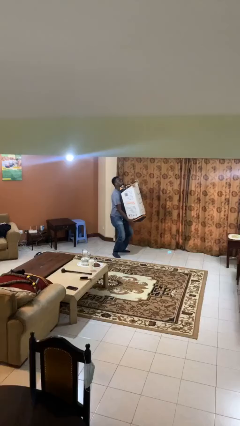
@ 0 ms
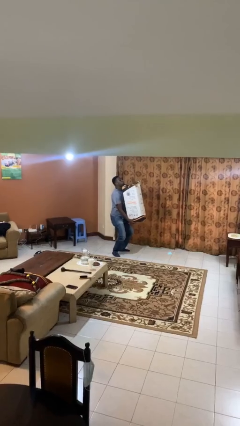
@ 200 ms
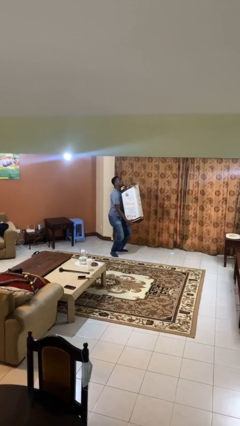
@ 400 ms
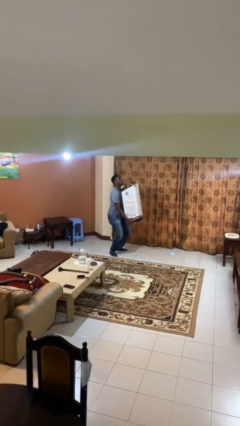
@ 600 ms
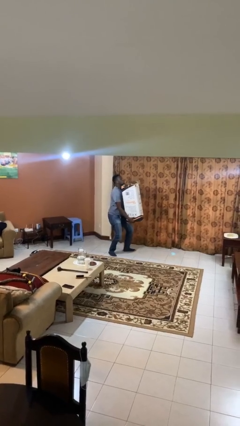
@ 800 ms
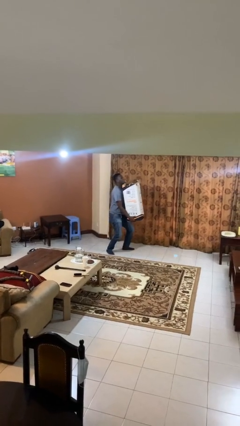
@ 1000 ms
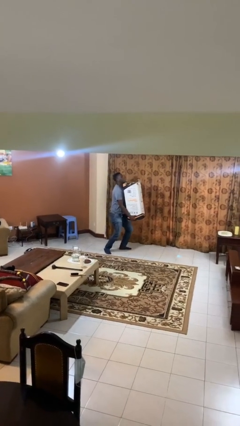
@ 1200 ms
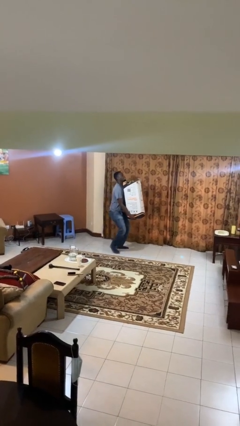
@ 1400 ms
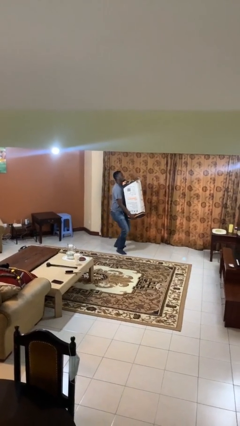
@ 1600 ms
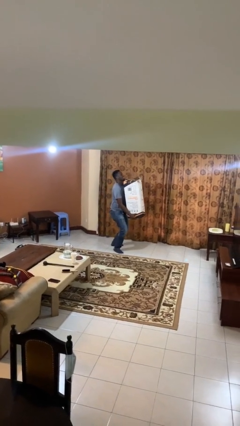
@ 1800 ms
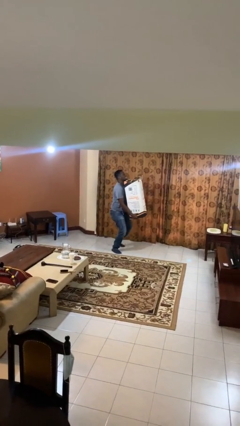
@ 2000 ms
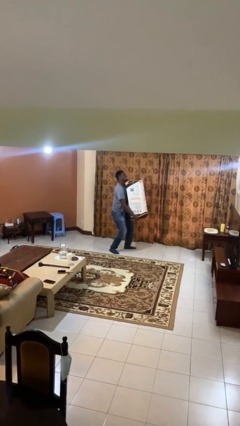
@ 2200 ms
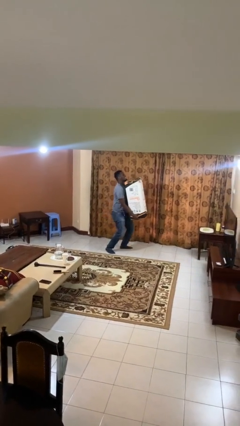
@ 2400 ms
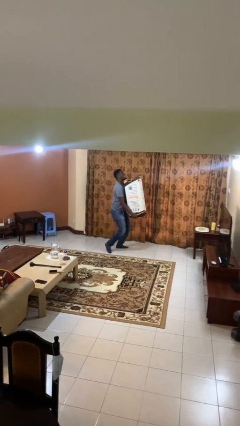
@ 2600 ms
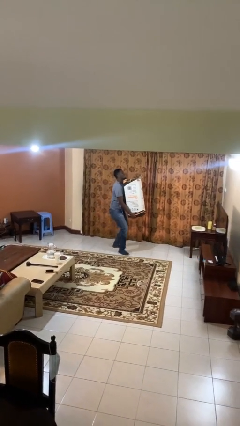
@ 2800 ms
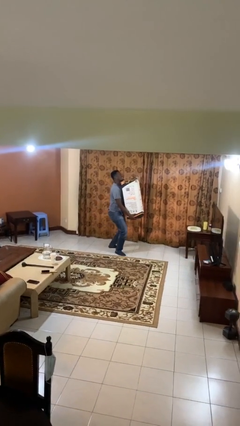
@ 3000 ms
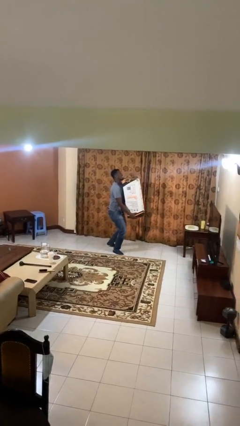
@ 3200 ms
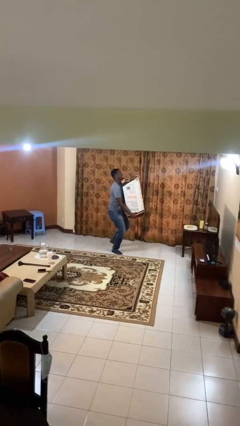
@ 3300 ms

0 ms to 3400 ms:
person carries heavy object

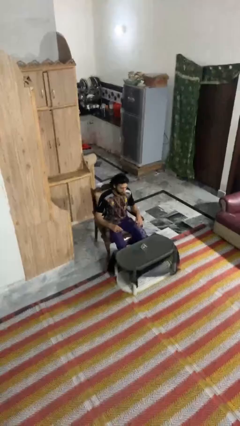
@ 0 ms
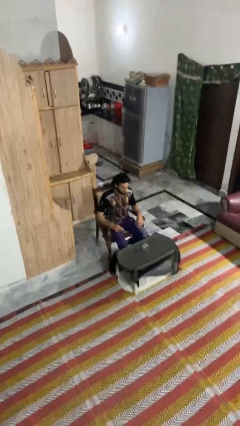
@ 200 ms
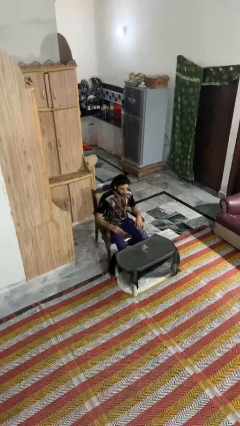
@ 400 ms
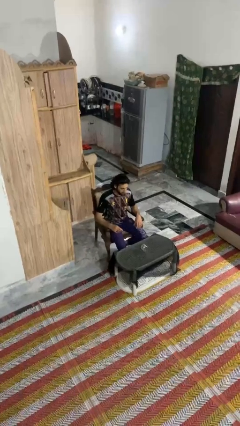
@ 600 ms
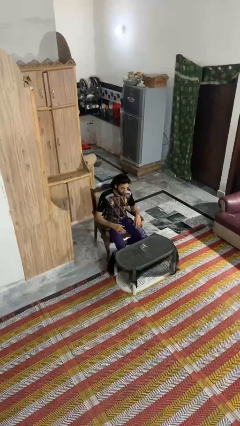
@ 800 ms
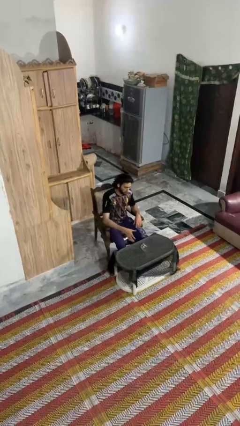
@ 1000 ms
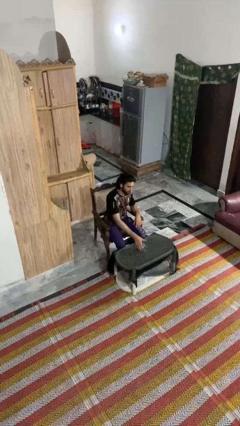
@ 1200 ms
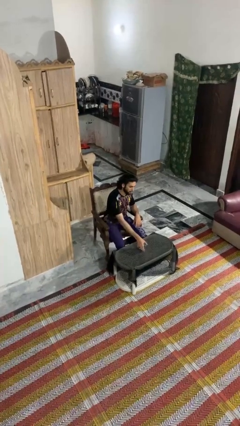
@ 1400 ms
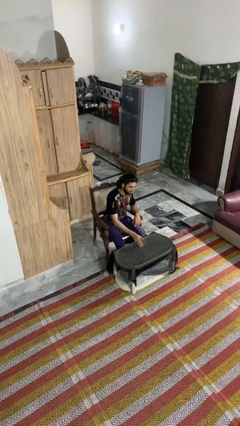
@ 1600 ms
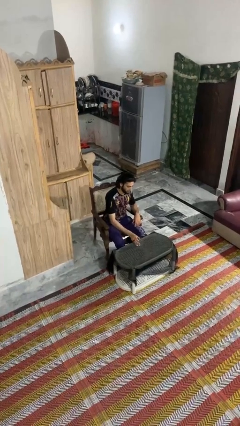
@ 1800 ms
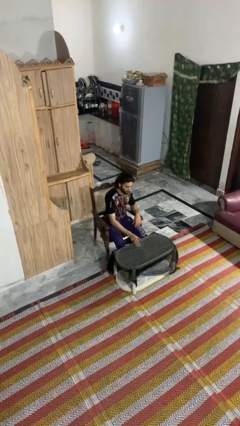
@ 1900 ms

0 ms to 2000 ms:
person sets upright glass

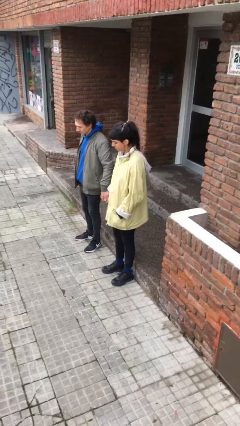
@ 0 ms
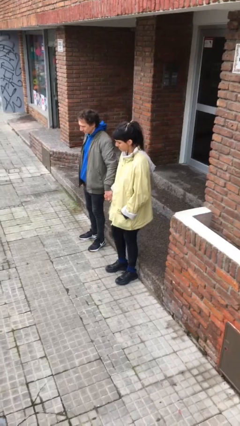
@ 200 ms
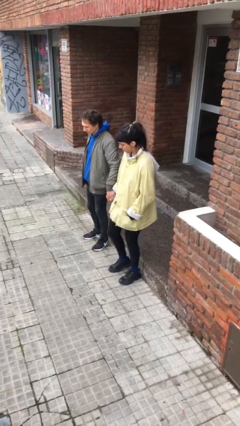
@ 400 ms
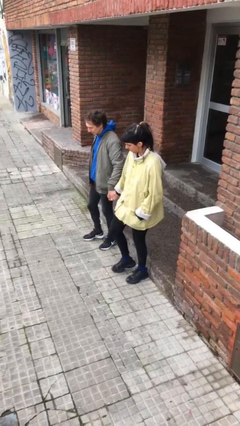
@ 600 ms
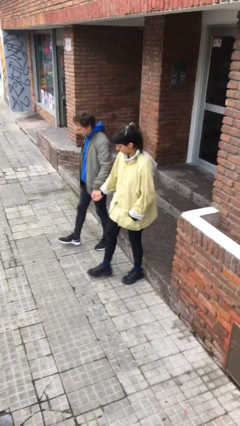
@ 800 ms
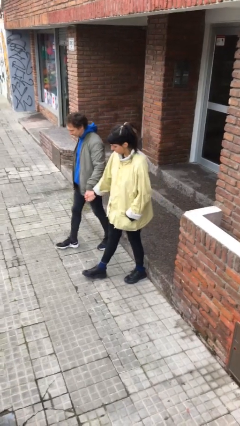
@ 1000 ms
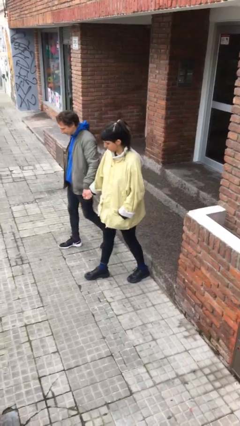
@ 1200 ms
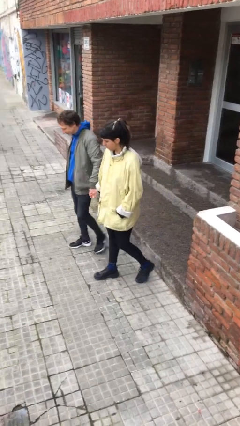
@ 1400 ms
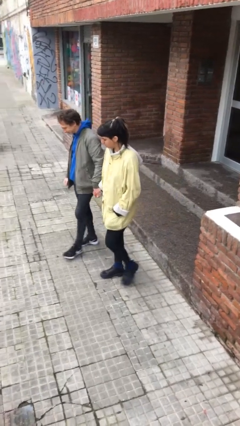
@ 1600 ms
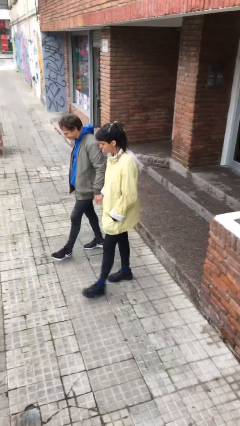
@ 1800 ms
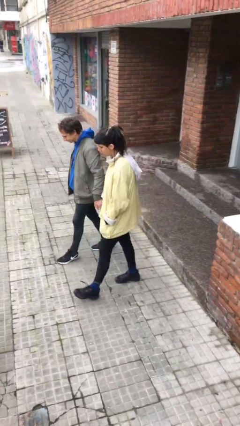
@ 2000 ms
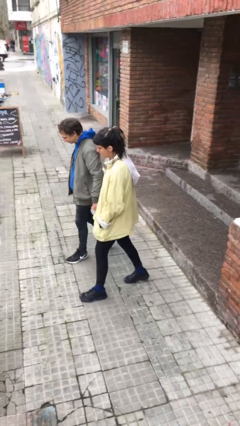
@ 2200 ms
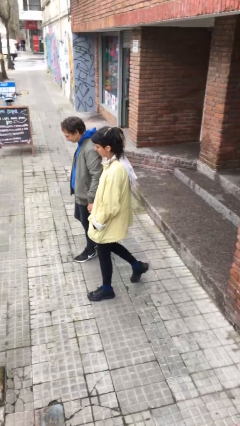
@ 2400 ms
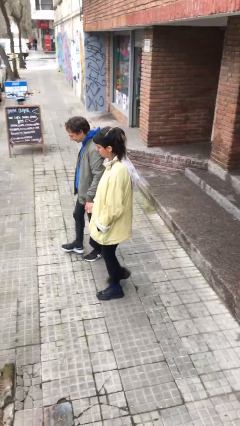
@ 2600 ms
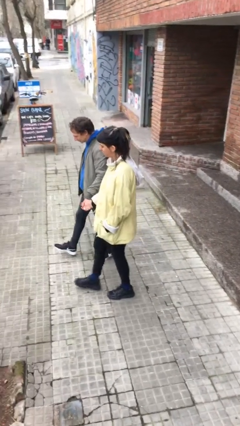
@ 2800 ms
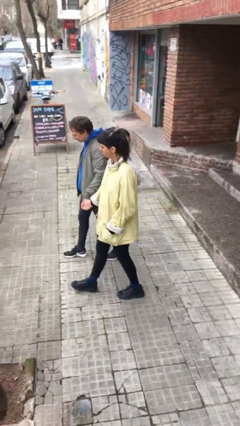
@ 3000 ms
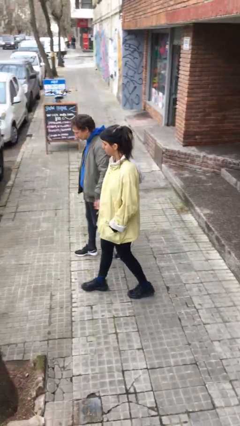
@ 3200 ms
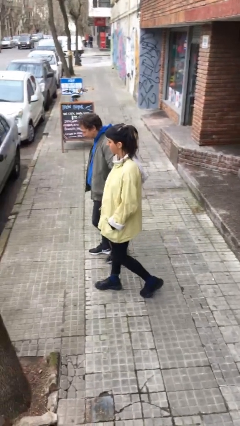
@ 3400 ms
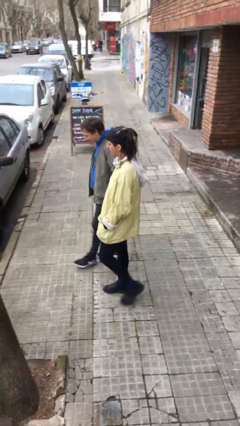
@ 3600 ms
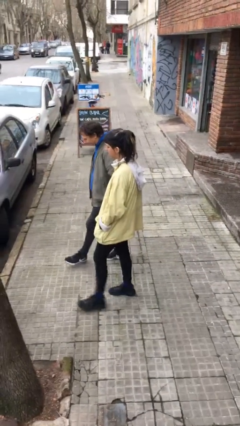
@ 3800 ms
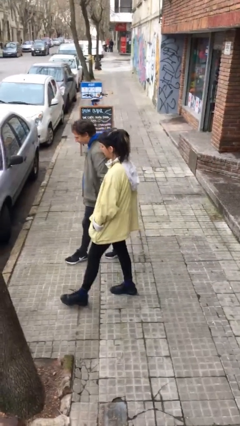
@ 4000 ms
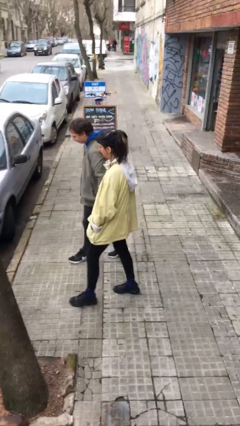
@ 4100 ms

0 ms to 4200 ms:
person holds hand

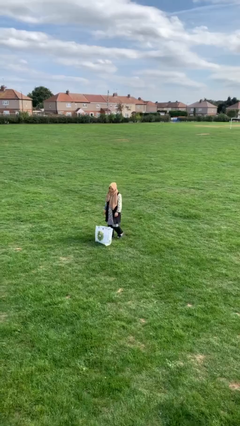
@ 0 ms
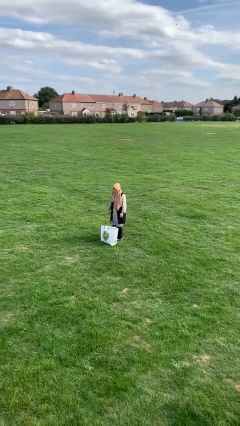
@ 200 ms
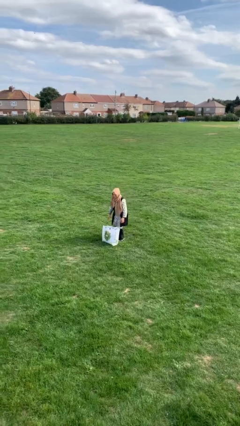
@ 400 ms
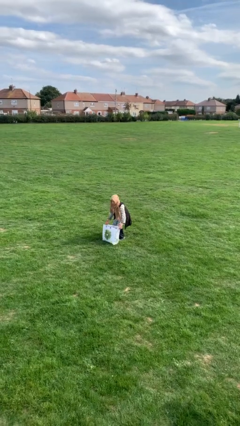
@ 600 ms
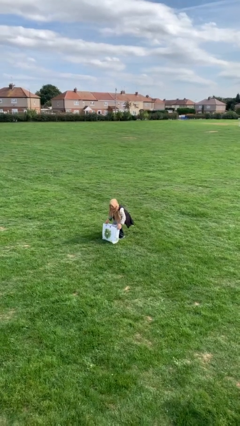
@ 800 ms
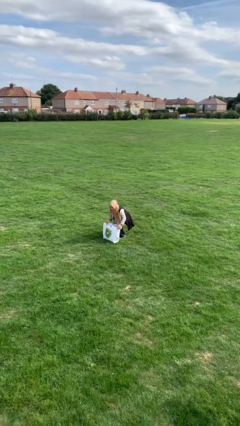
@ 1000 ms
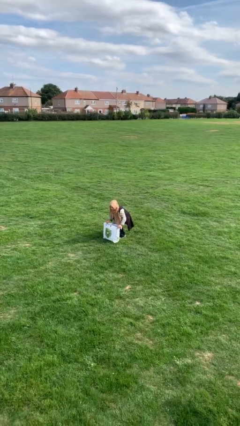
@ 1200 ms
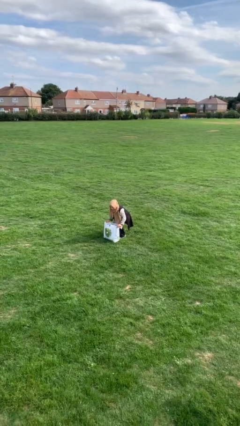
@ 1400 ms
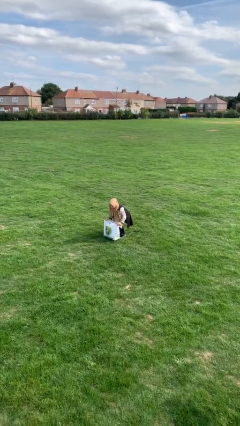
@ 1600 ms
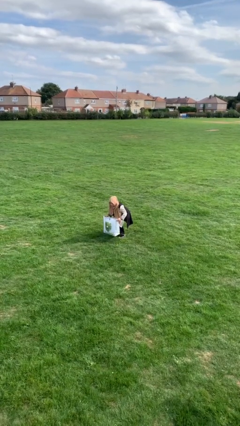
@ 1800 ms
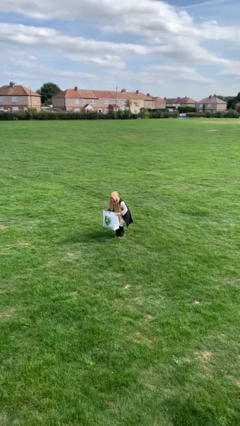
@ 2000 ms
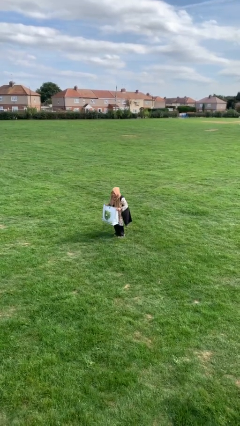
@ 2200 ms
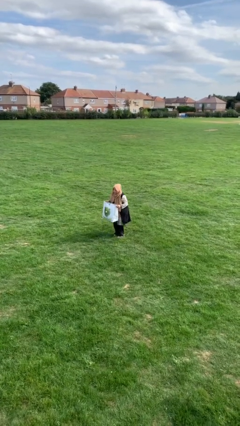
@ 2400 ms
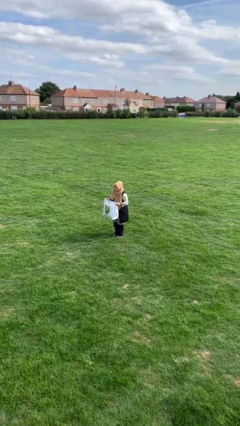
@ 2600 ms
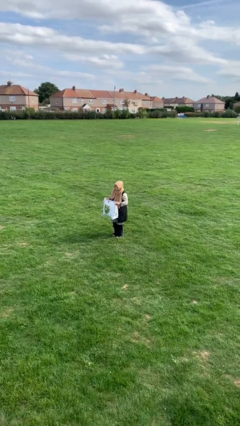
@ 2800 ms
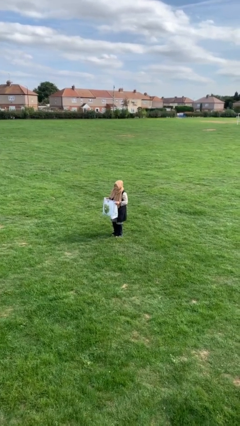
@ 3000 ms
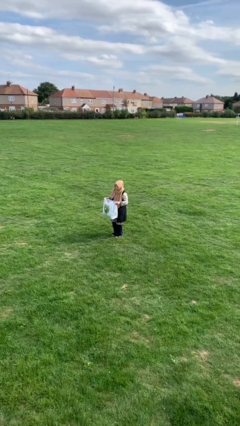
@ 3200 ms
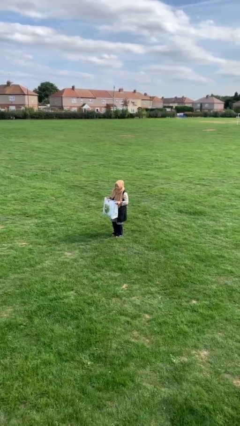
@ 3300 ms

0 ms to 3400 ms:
person picks up object from floor

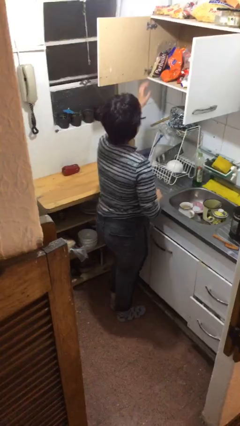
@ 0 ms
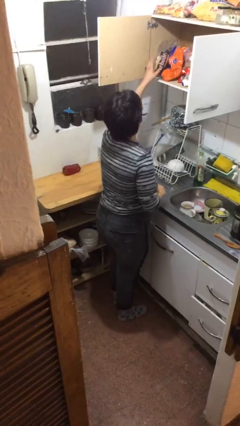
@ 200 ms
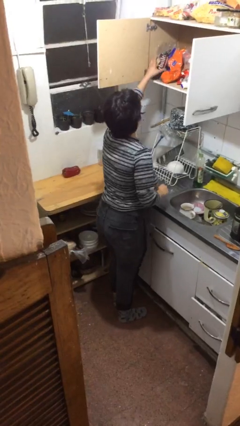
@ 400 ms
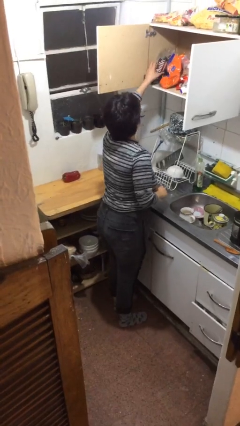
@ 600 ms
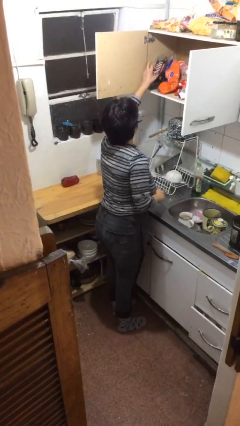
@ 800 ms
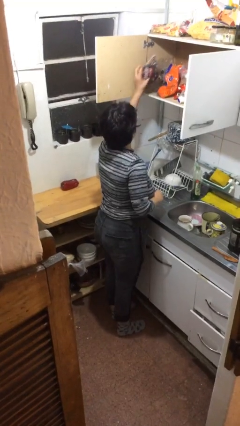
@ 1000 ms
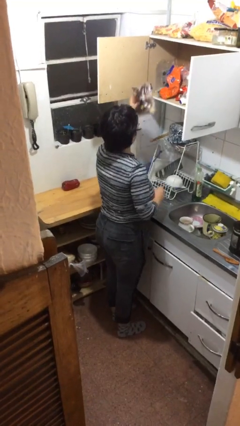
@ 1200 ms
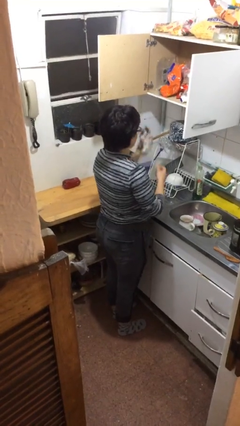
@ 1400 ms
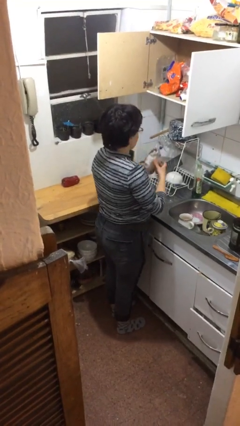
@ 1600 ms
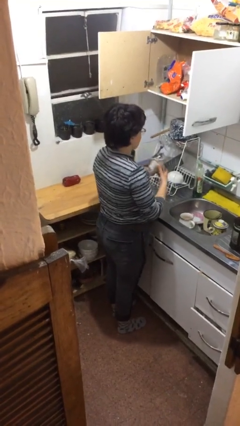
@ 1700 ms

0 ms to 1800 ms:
person takes object from cabinet

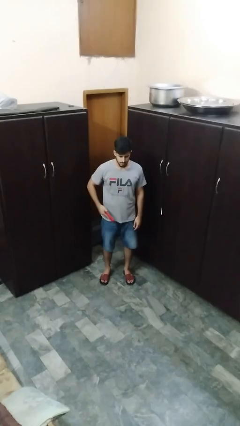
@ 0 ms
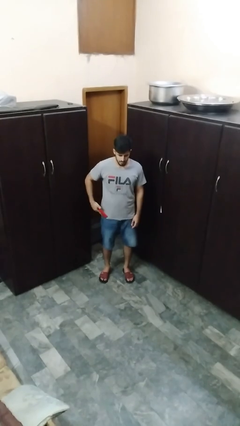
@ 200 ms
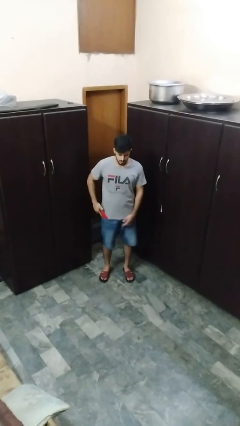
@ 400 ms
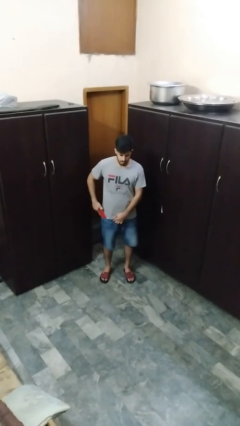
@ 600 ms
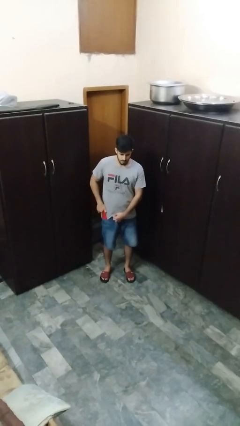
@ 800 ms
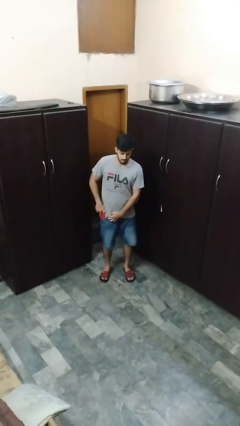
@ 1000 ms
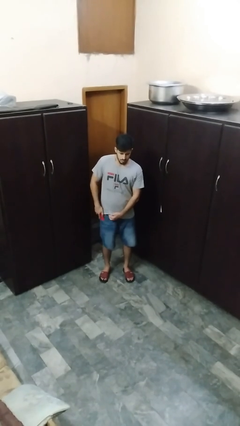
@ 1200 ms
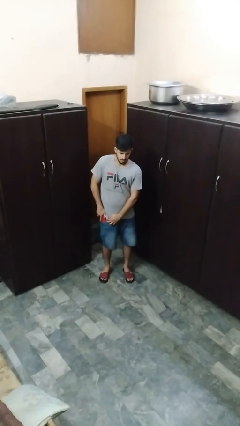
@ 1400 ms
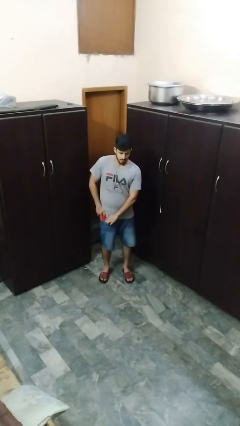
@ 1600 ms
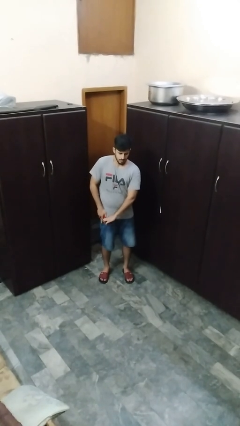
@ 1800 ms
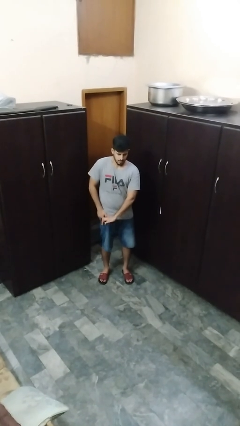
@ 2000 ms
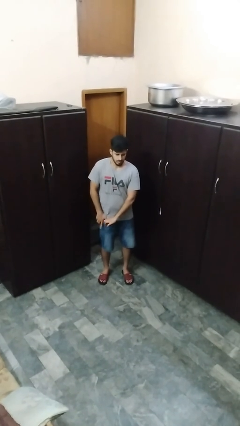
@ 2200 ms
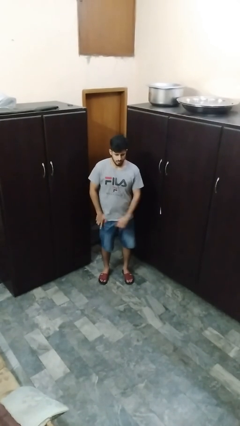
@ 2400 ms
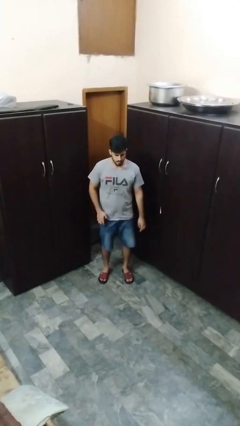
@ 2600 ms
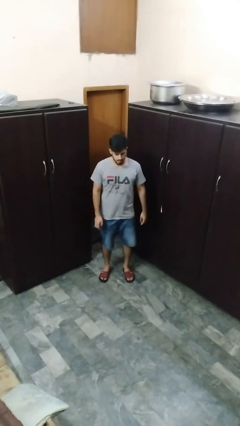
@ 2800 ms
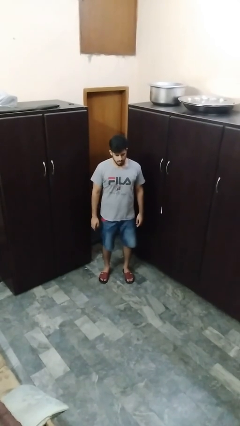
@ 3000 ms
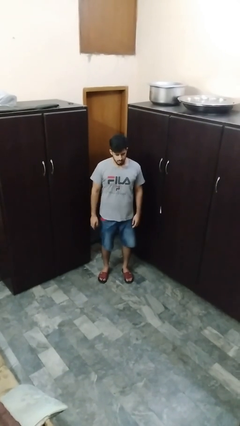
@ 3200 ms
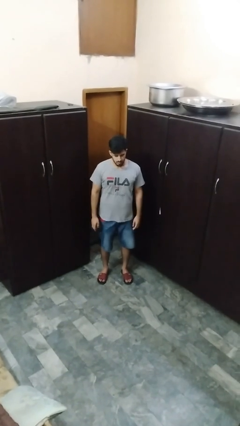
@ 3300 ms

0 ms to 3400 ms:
person puts phone into pocket
